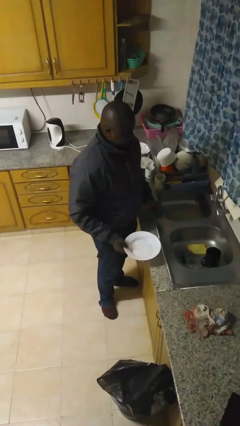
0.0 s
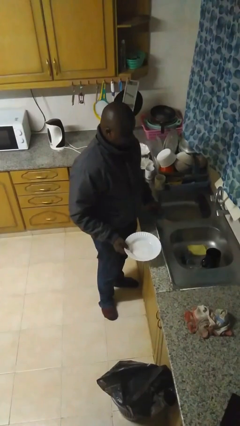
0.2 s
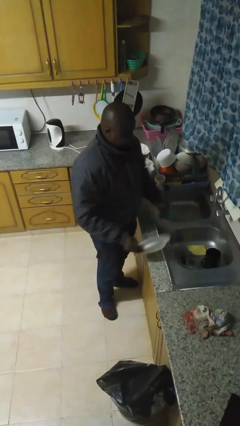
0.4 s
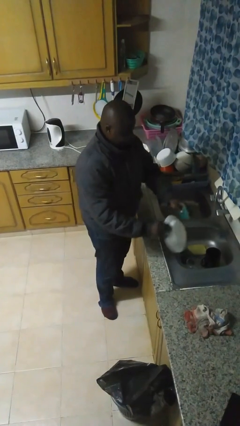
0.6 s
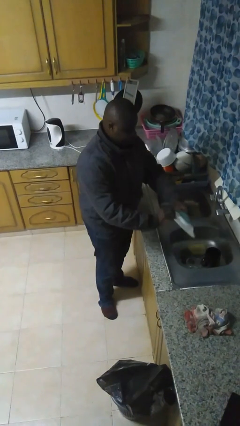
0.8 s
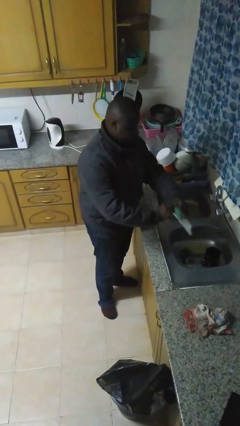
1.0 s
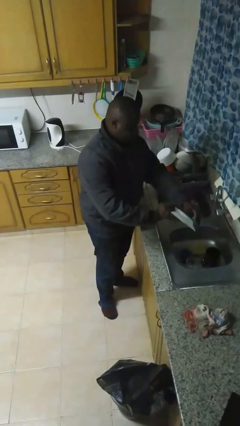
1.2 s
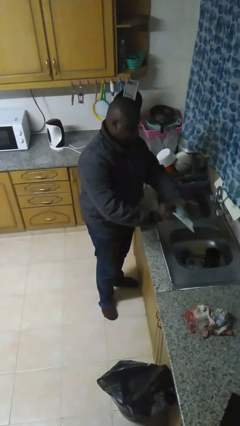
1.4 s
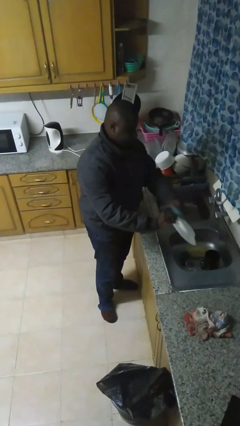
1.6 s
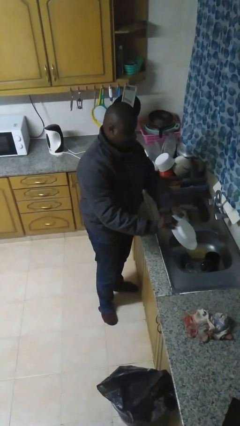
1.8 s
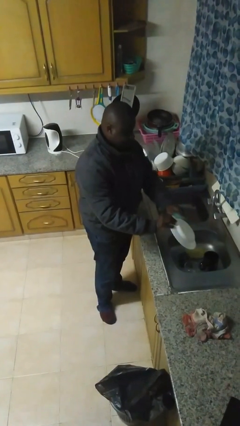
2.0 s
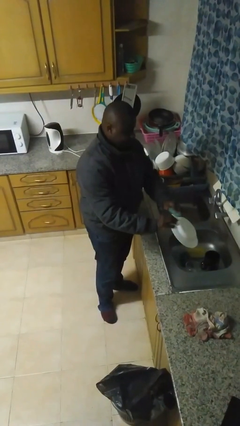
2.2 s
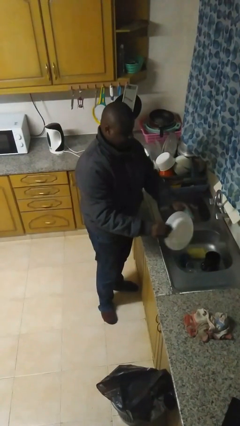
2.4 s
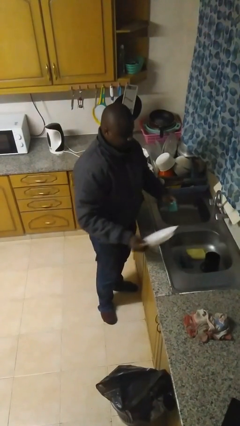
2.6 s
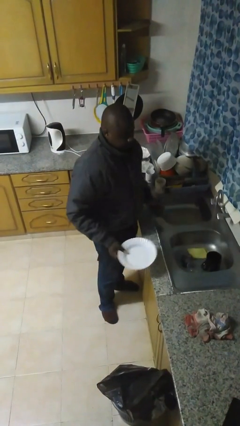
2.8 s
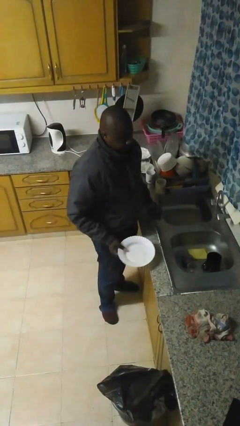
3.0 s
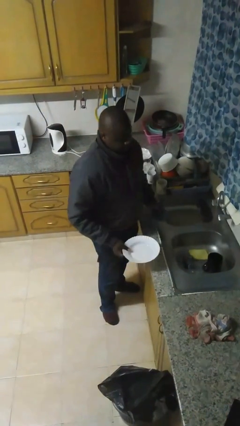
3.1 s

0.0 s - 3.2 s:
person washes dish

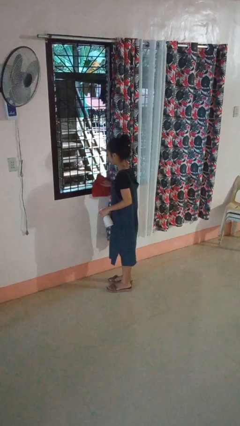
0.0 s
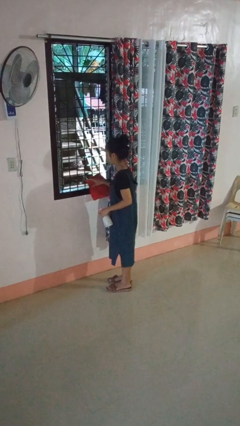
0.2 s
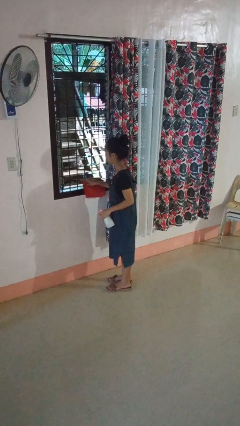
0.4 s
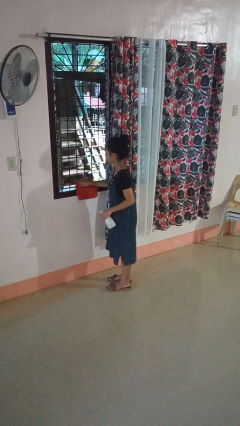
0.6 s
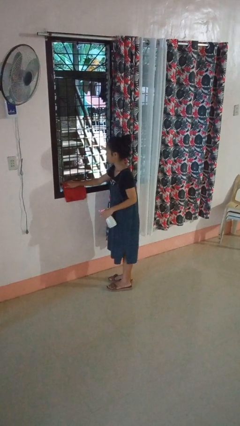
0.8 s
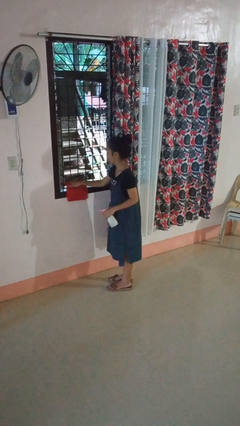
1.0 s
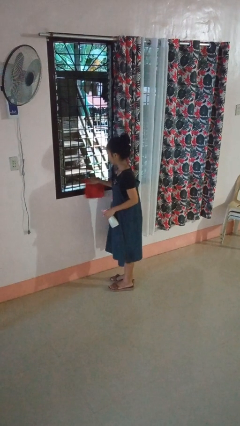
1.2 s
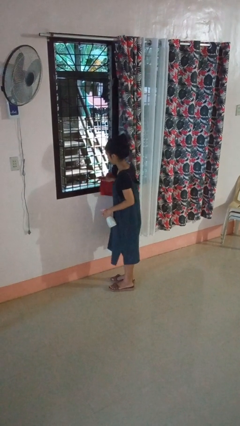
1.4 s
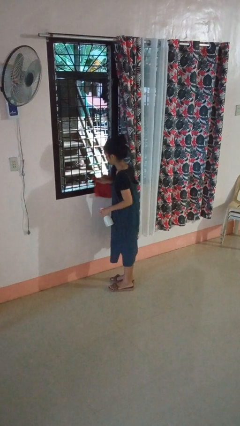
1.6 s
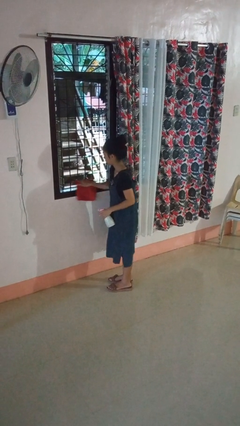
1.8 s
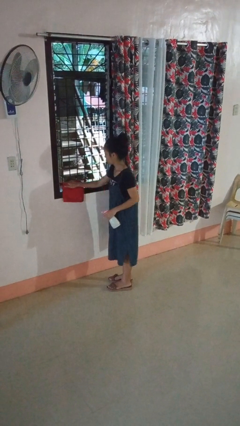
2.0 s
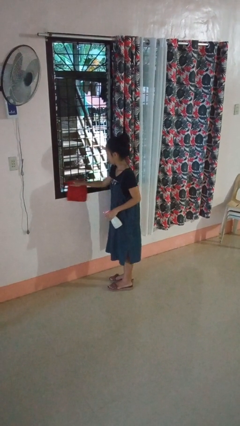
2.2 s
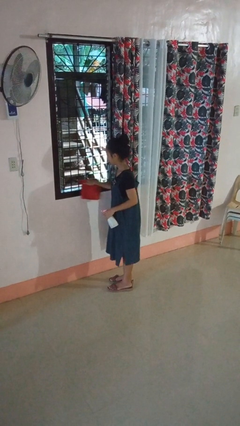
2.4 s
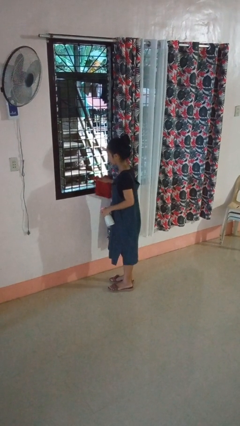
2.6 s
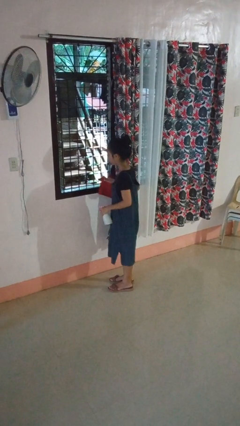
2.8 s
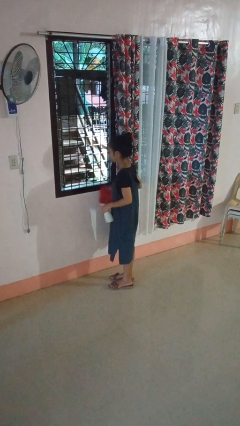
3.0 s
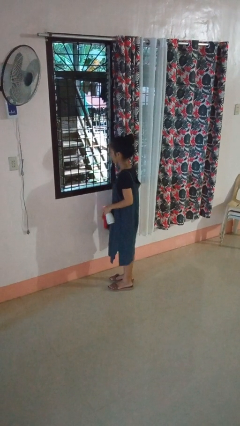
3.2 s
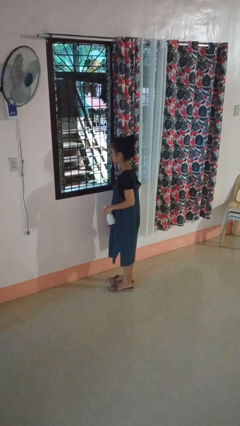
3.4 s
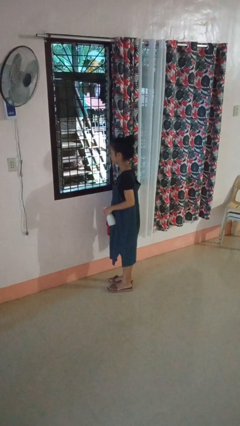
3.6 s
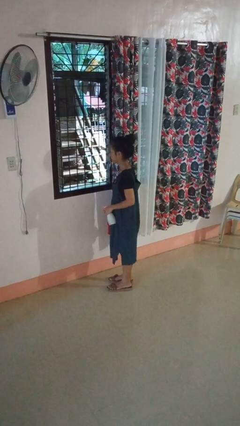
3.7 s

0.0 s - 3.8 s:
person washes window

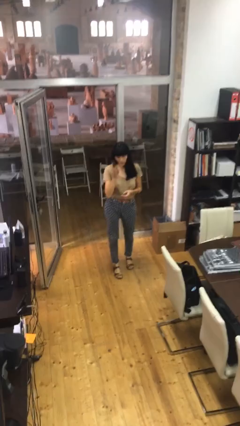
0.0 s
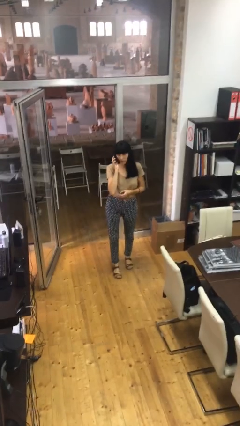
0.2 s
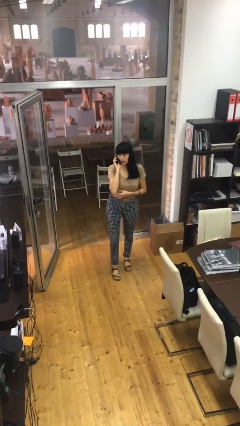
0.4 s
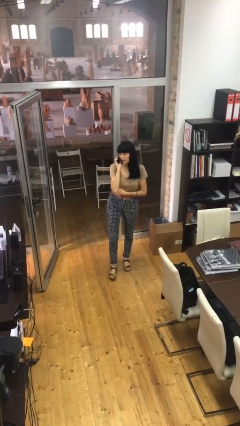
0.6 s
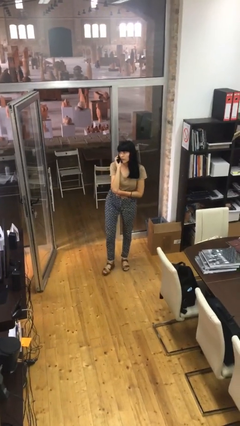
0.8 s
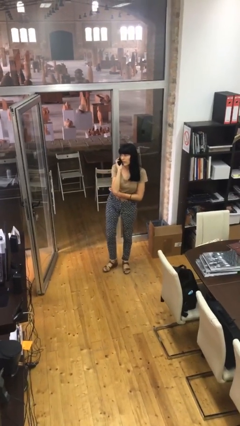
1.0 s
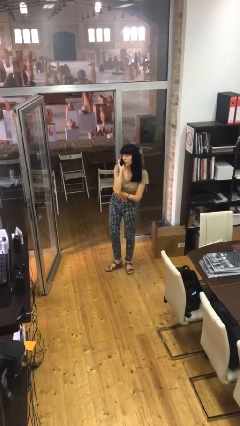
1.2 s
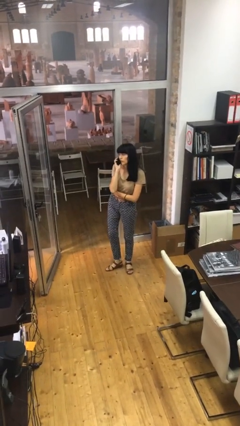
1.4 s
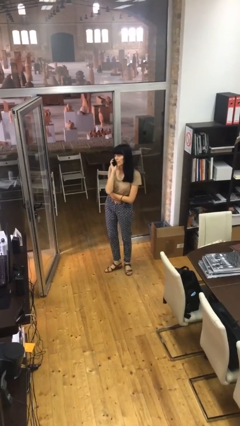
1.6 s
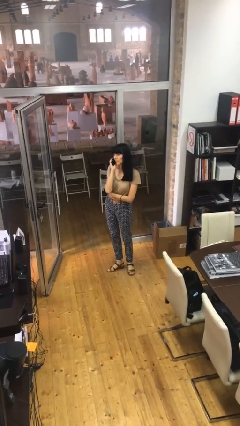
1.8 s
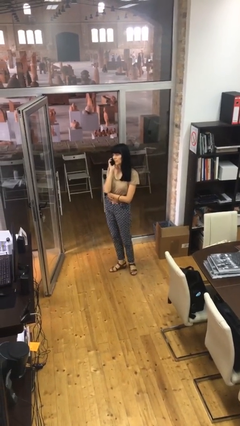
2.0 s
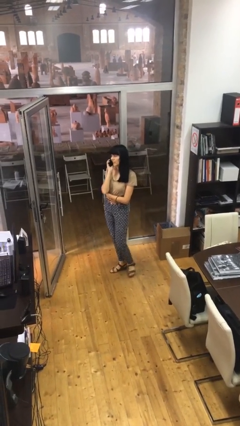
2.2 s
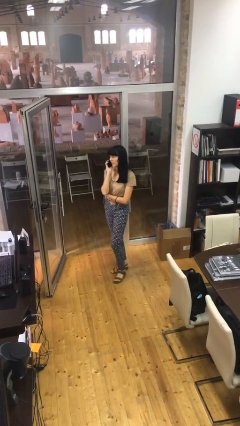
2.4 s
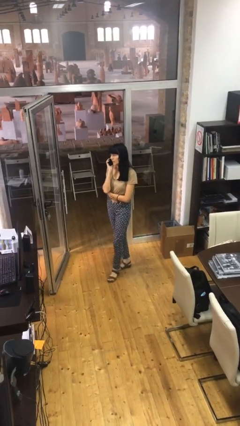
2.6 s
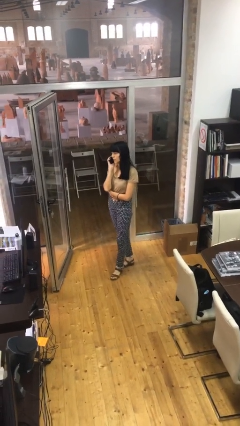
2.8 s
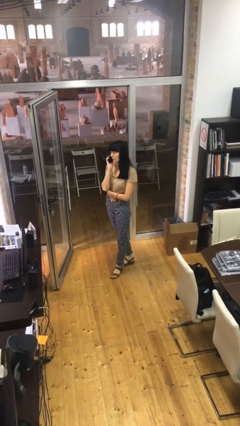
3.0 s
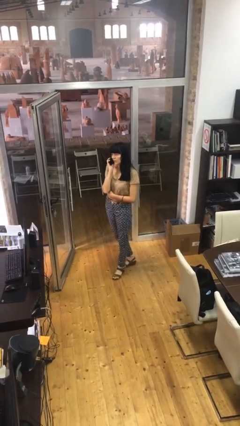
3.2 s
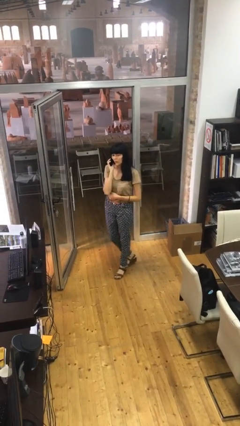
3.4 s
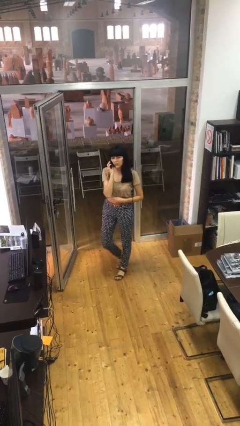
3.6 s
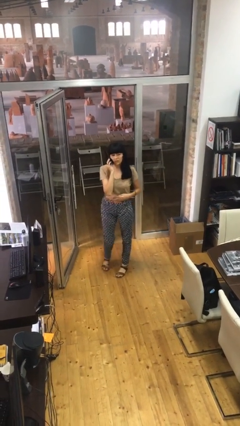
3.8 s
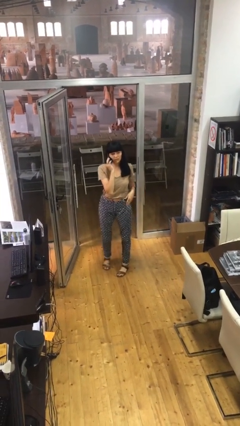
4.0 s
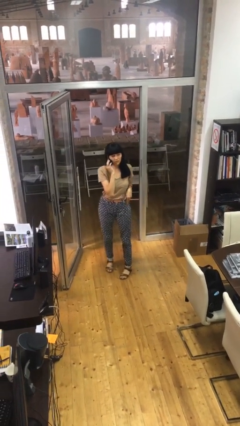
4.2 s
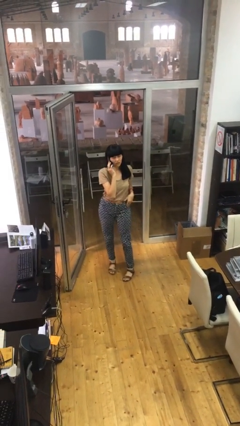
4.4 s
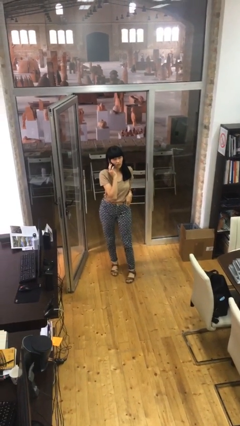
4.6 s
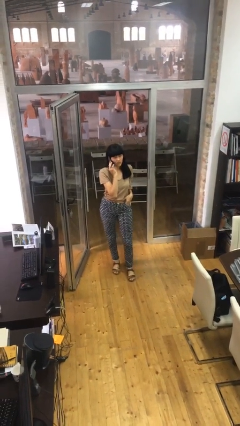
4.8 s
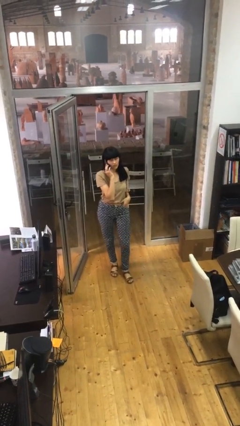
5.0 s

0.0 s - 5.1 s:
person talks on phone

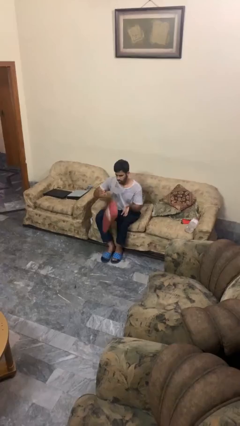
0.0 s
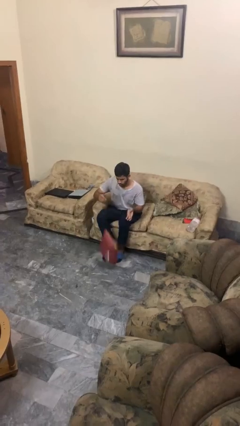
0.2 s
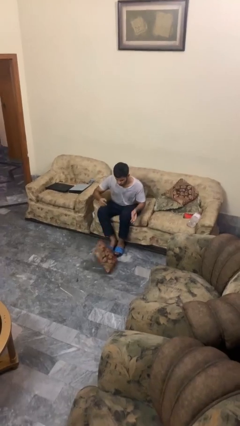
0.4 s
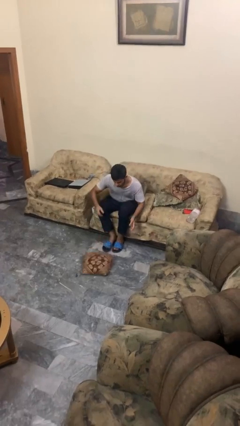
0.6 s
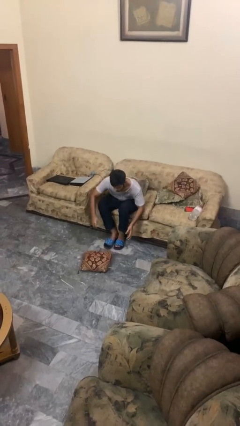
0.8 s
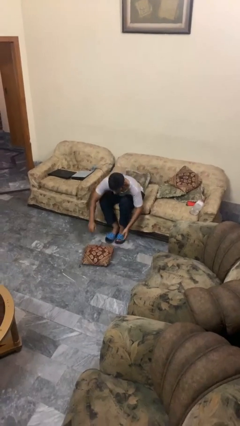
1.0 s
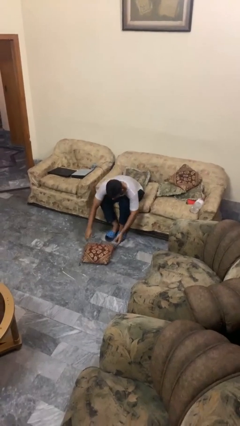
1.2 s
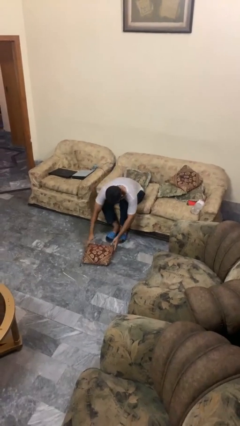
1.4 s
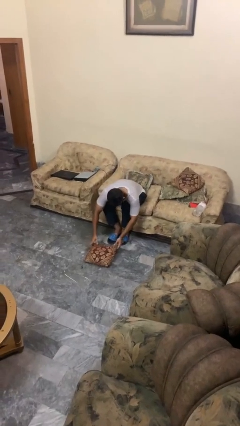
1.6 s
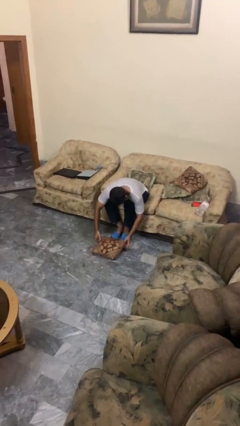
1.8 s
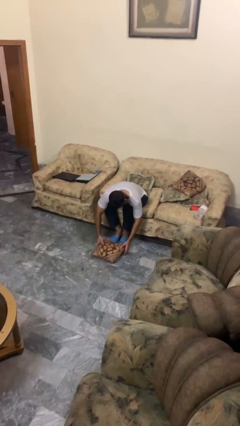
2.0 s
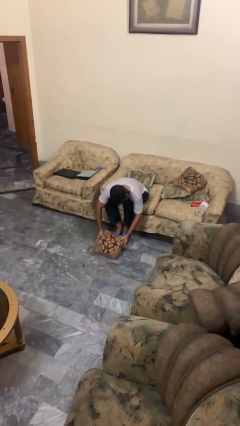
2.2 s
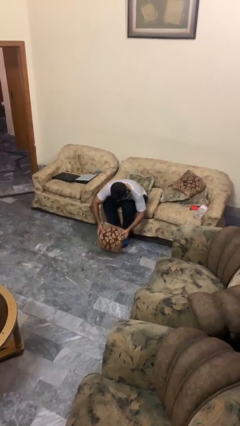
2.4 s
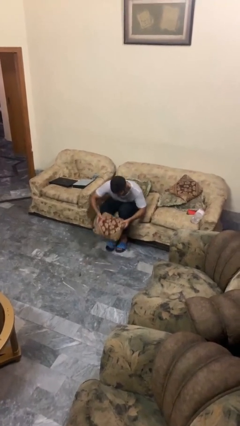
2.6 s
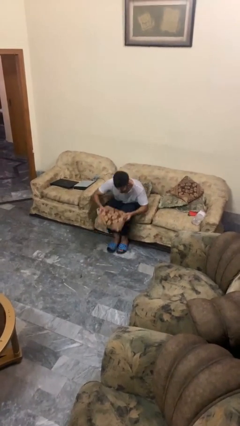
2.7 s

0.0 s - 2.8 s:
person drops object

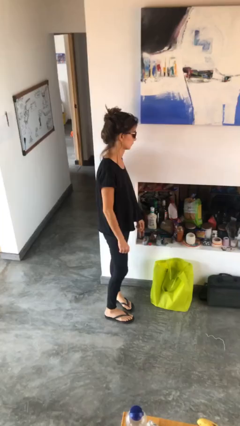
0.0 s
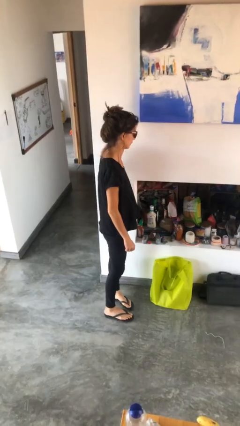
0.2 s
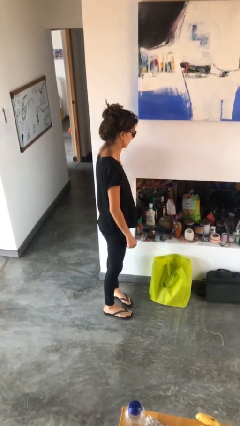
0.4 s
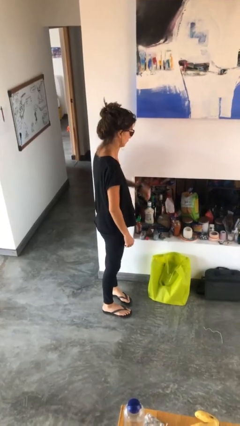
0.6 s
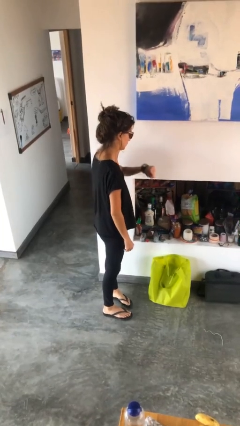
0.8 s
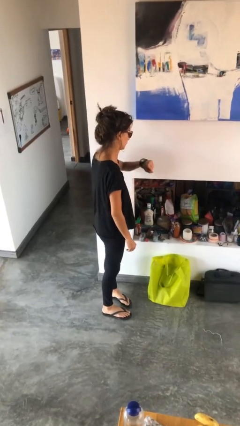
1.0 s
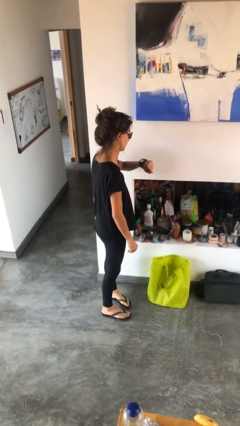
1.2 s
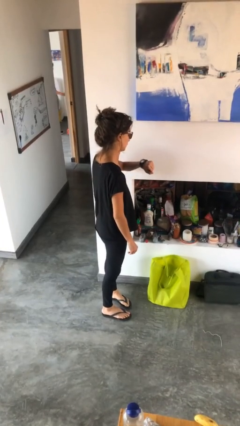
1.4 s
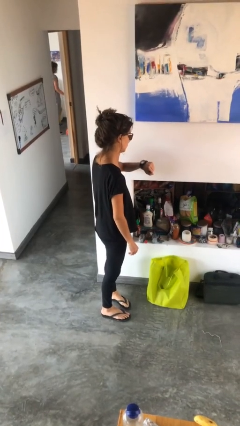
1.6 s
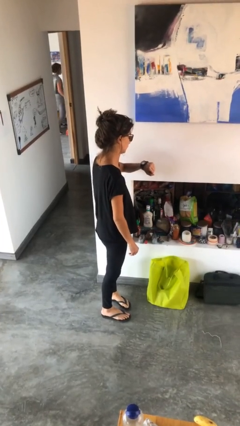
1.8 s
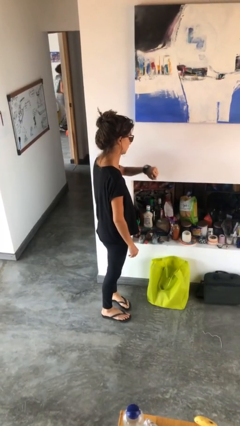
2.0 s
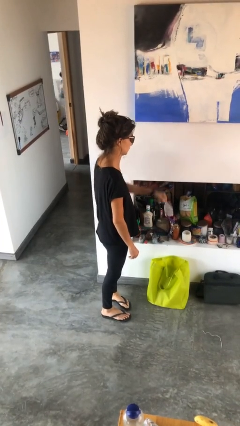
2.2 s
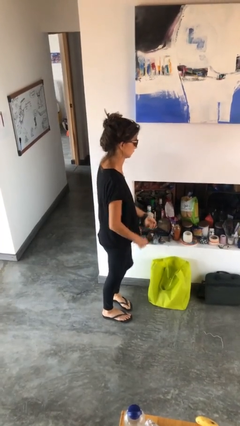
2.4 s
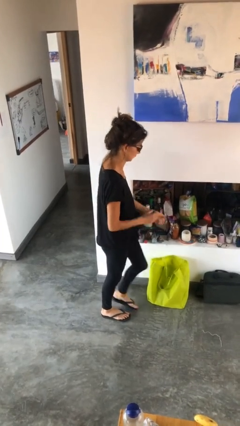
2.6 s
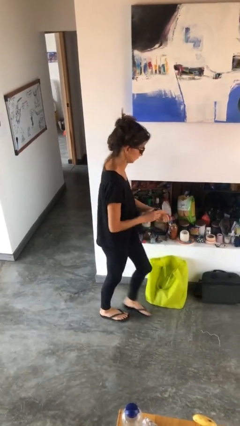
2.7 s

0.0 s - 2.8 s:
person looks at wristwatch
